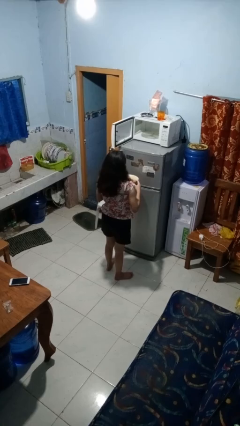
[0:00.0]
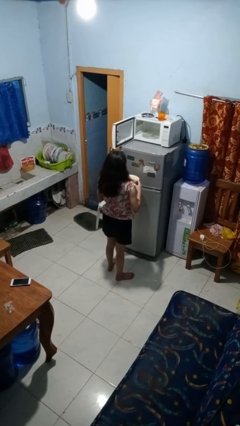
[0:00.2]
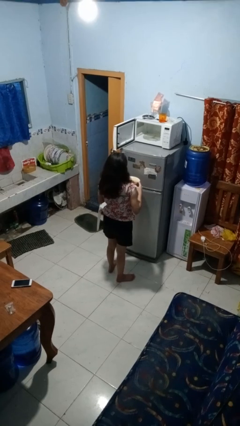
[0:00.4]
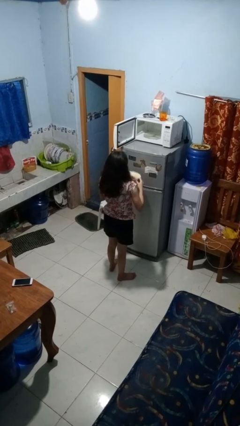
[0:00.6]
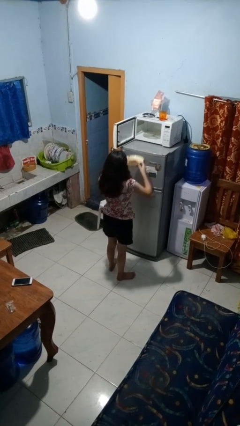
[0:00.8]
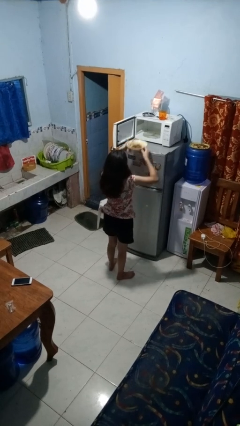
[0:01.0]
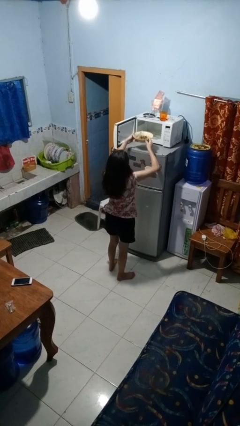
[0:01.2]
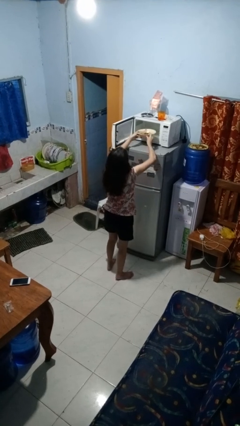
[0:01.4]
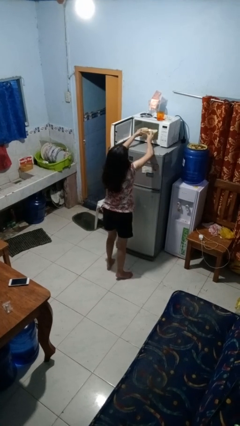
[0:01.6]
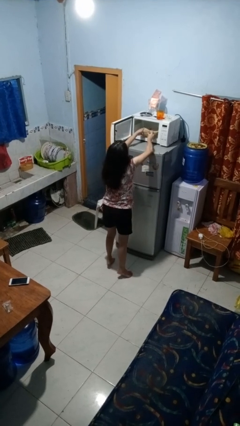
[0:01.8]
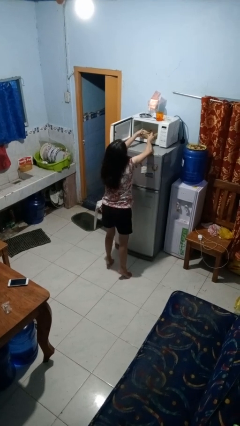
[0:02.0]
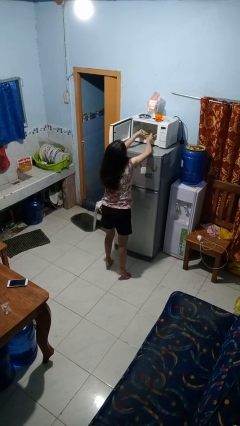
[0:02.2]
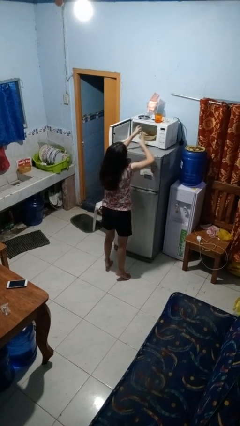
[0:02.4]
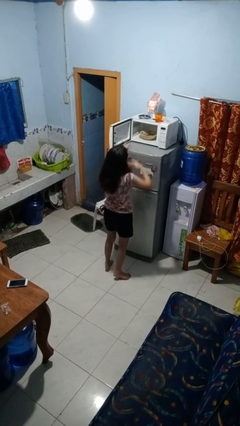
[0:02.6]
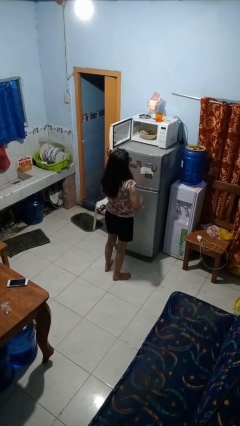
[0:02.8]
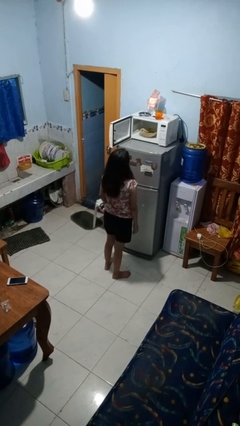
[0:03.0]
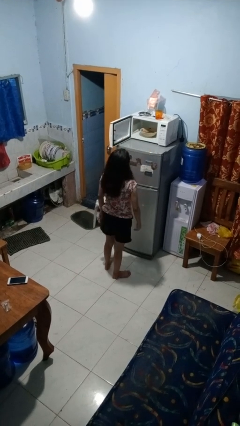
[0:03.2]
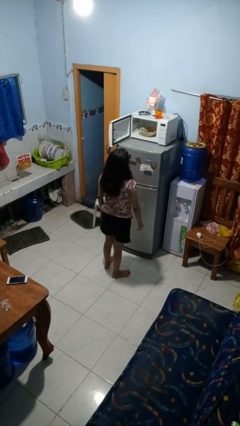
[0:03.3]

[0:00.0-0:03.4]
person puts object into microwave

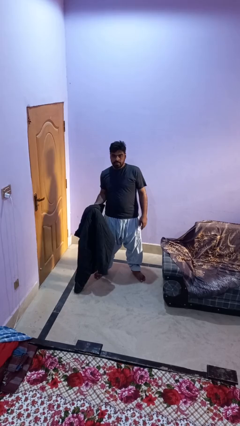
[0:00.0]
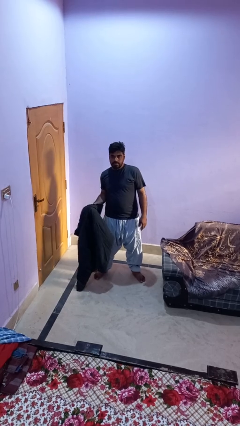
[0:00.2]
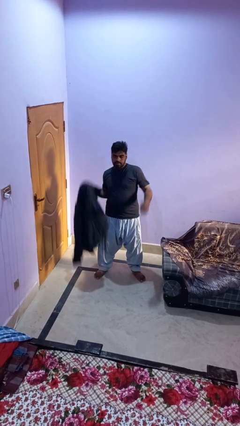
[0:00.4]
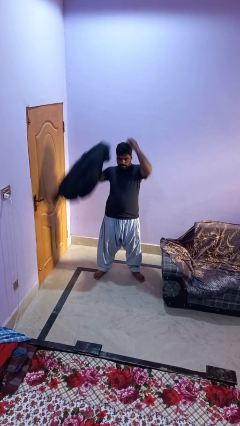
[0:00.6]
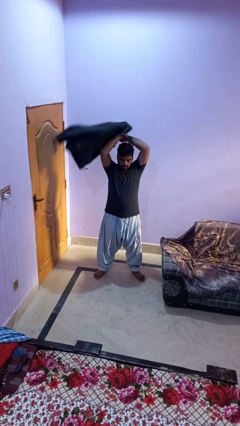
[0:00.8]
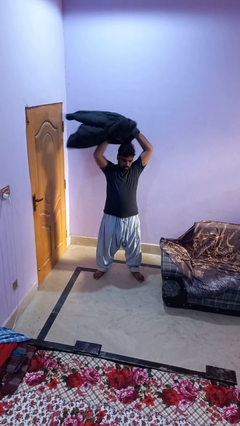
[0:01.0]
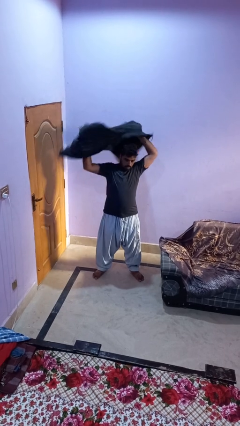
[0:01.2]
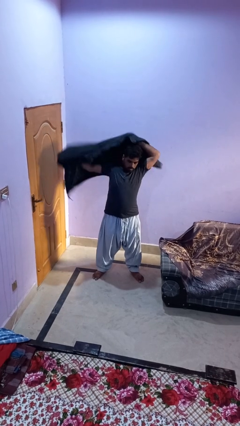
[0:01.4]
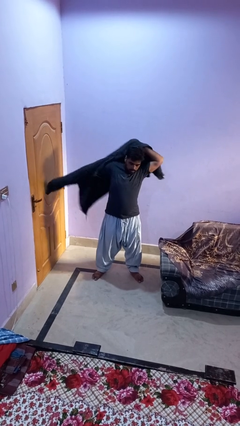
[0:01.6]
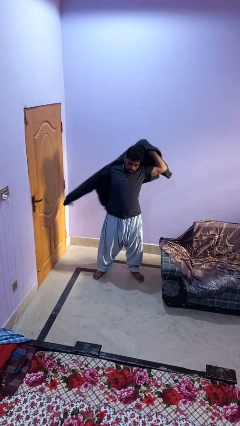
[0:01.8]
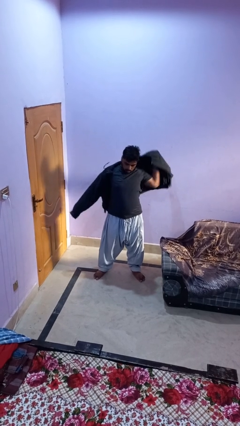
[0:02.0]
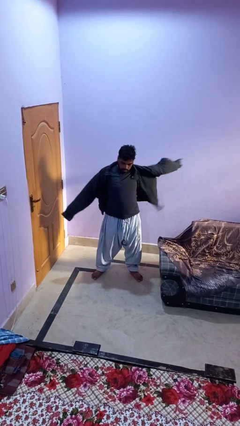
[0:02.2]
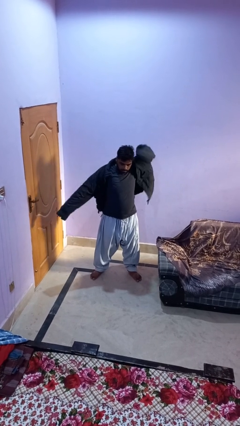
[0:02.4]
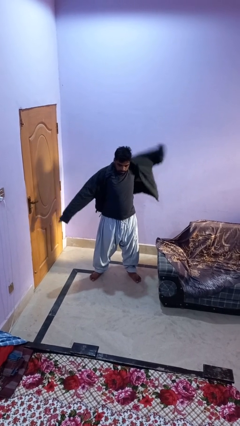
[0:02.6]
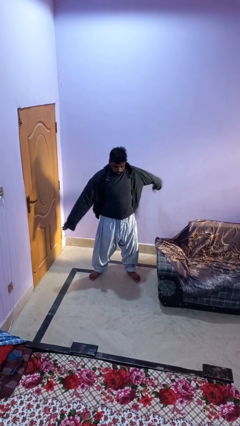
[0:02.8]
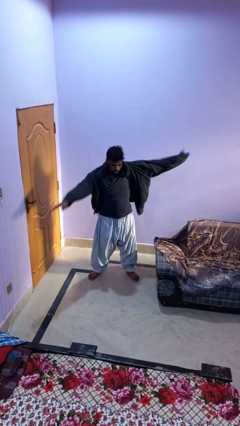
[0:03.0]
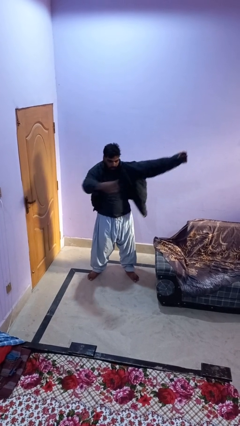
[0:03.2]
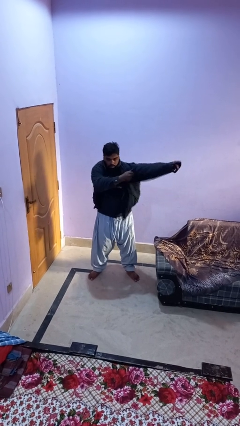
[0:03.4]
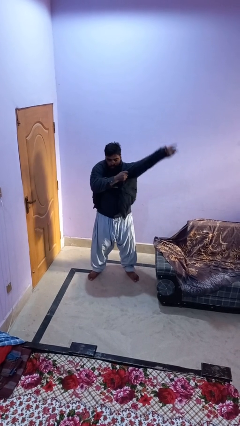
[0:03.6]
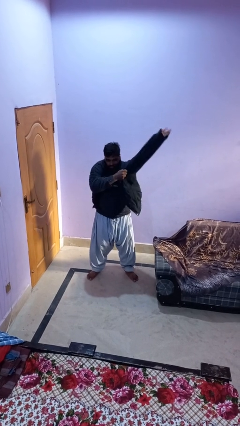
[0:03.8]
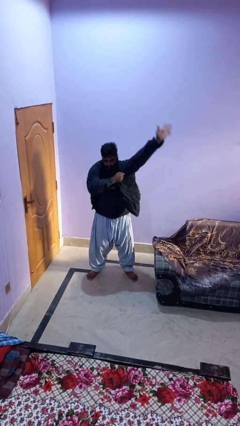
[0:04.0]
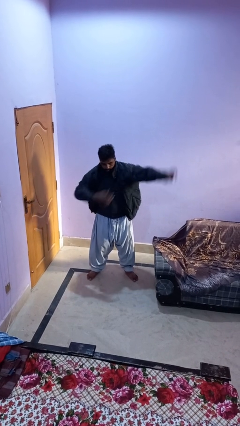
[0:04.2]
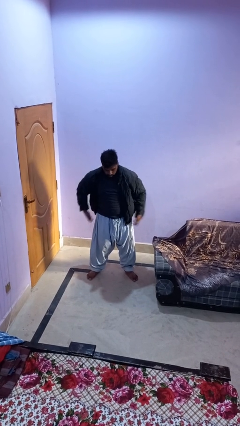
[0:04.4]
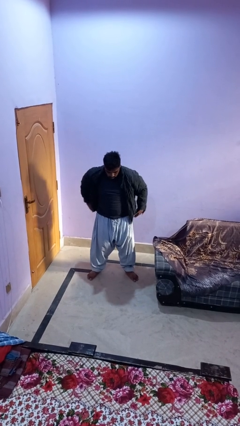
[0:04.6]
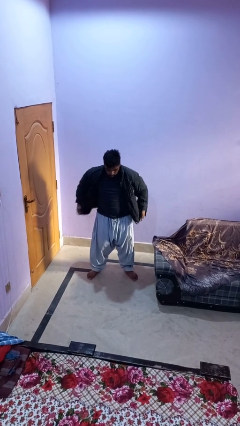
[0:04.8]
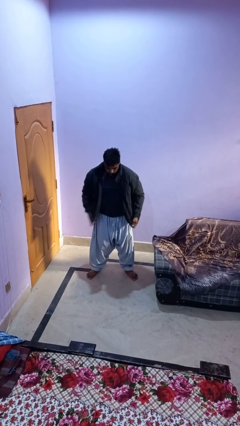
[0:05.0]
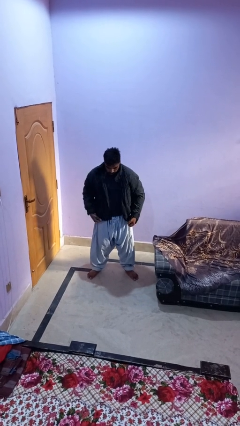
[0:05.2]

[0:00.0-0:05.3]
person puts on jacket

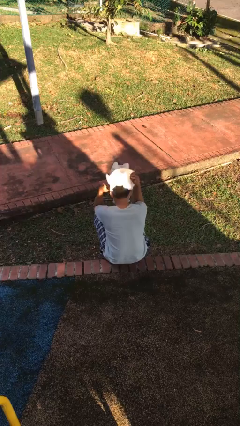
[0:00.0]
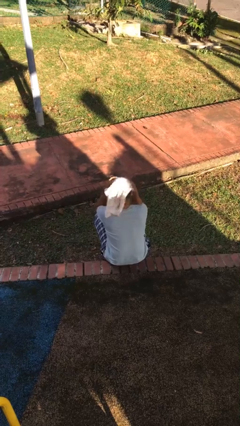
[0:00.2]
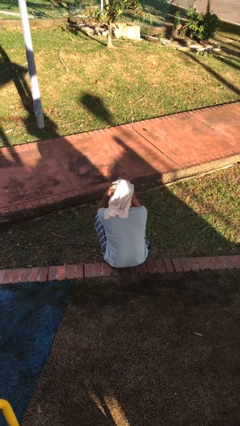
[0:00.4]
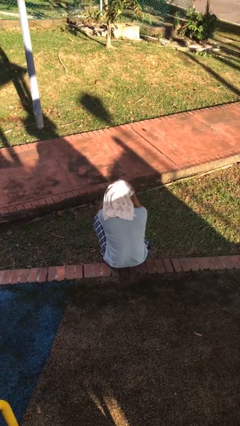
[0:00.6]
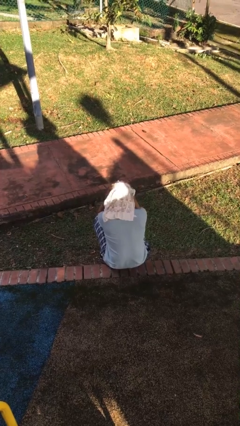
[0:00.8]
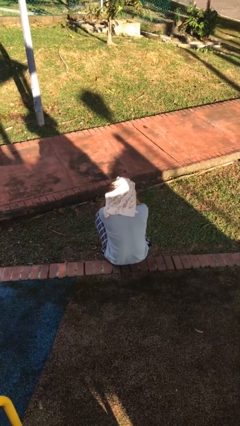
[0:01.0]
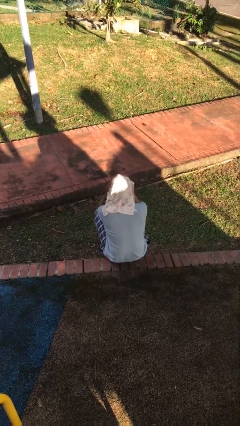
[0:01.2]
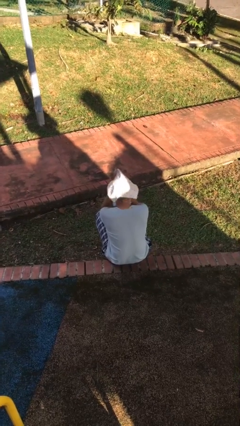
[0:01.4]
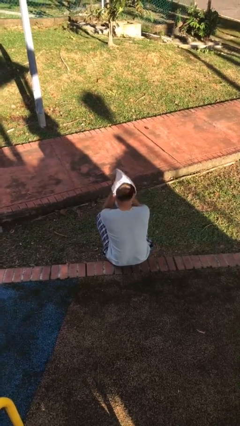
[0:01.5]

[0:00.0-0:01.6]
person dries hair with towel

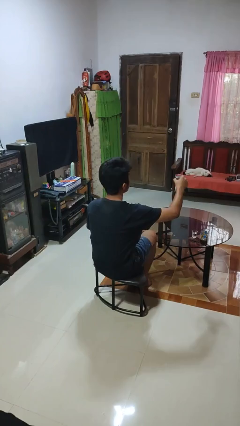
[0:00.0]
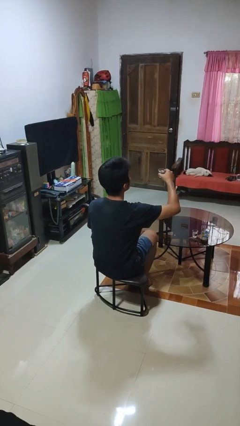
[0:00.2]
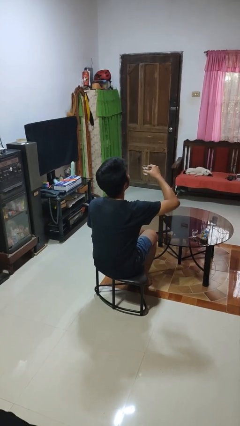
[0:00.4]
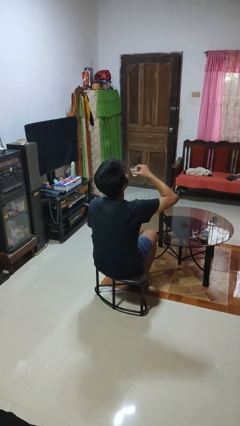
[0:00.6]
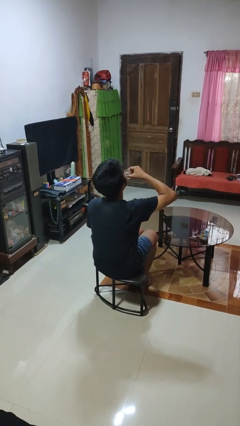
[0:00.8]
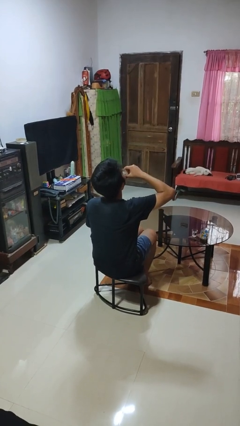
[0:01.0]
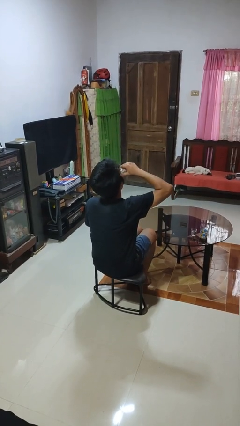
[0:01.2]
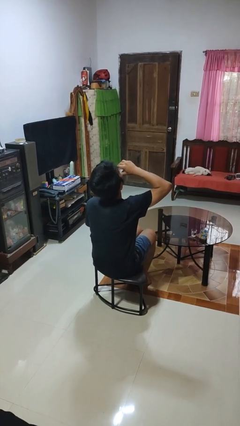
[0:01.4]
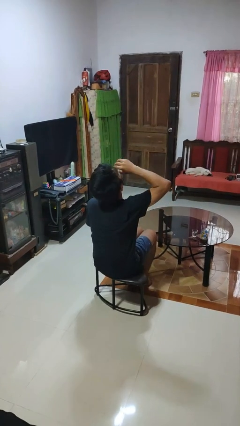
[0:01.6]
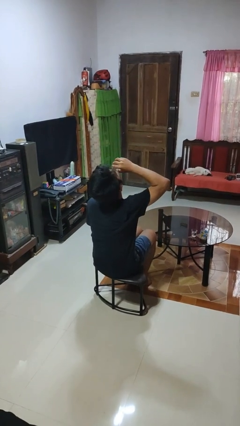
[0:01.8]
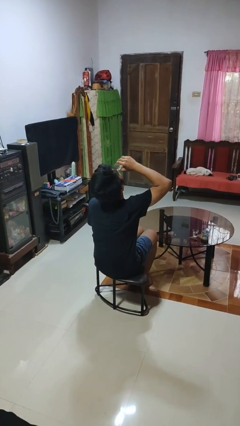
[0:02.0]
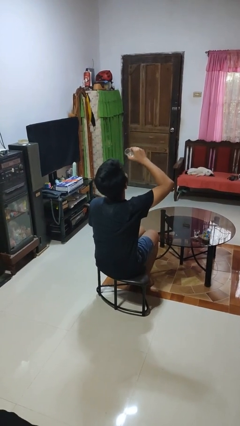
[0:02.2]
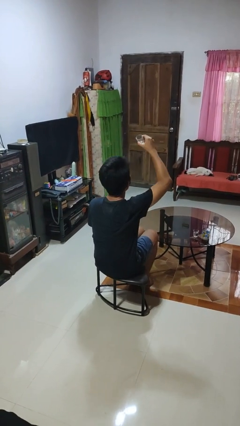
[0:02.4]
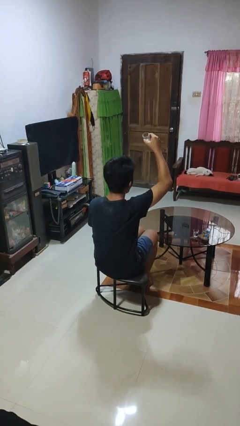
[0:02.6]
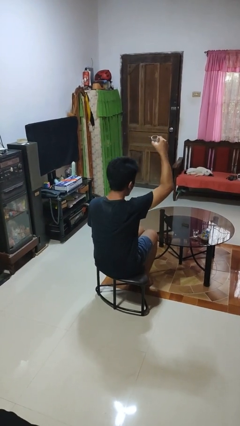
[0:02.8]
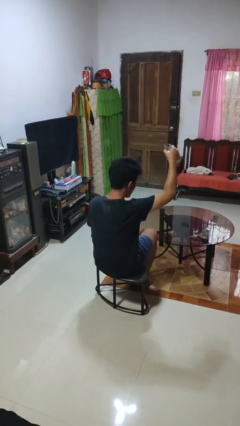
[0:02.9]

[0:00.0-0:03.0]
person drinks from shotglass

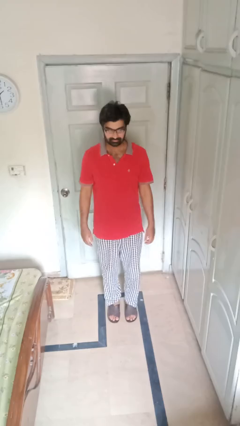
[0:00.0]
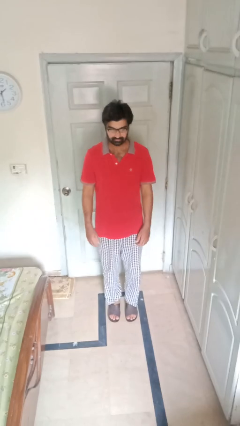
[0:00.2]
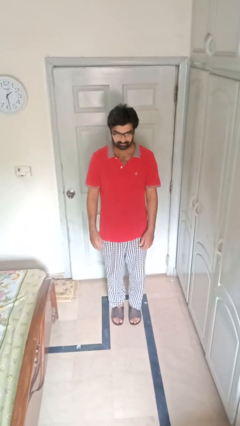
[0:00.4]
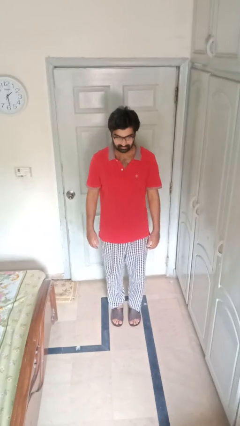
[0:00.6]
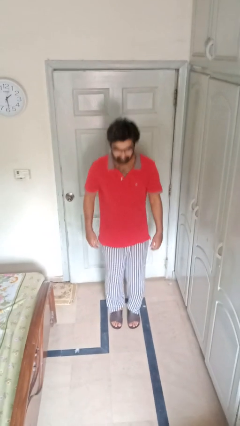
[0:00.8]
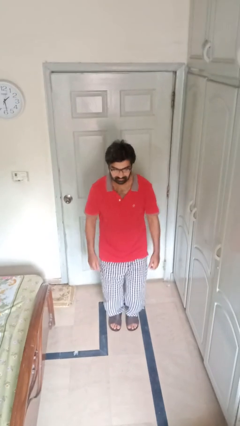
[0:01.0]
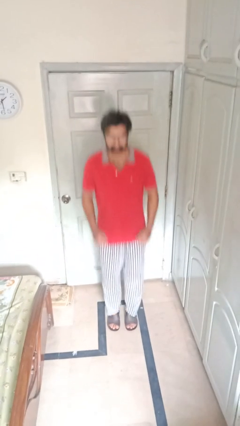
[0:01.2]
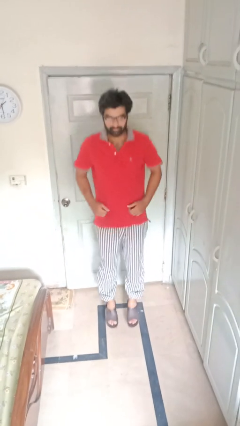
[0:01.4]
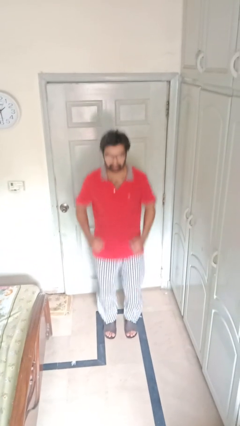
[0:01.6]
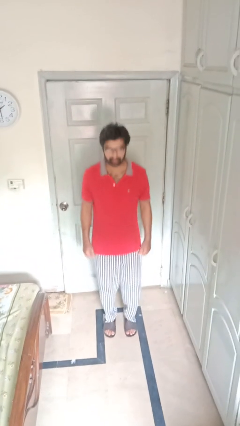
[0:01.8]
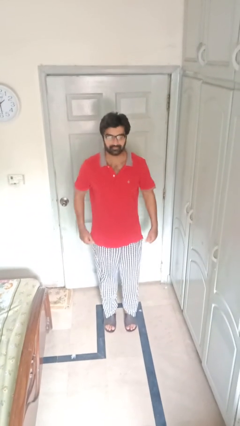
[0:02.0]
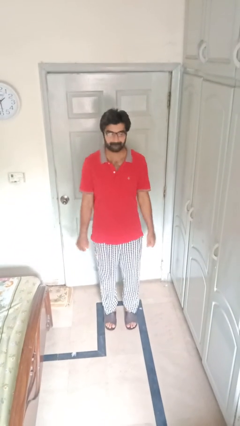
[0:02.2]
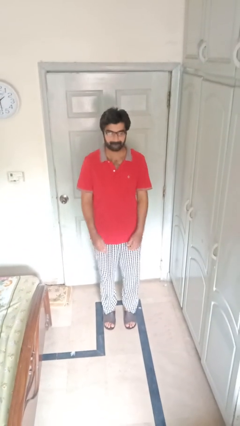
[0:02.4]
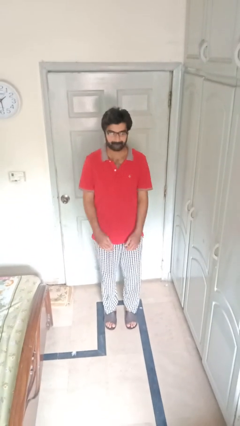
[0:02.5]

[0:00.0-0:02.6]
person jumps

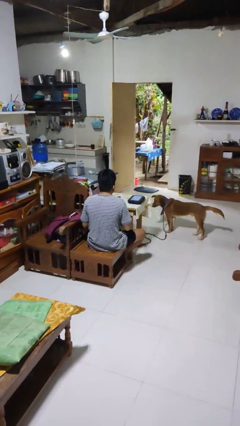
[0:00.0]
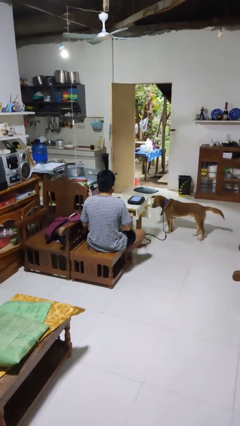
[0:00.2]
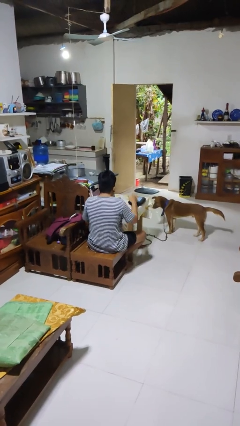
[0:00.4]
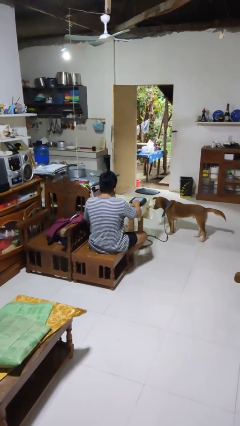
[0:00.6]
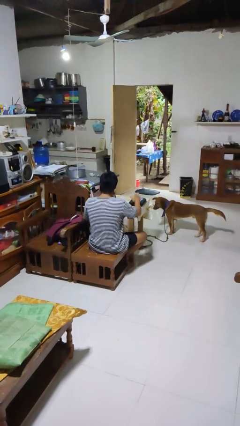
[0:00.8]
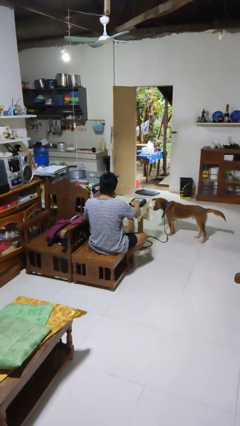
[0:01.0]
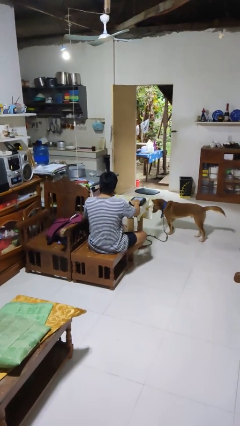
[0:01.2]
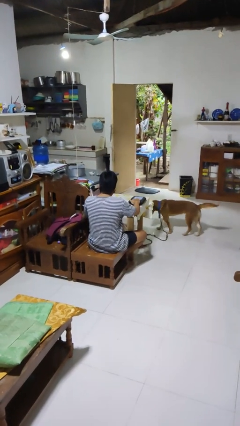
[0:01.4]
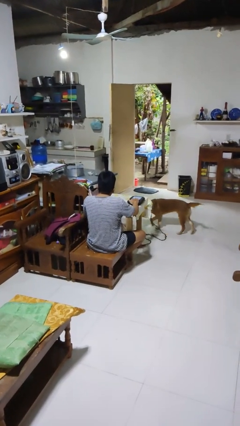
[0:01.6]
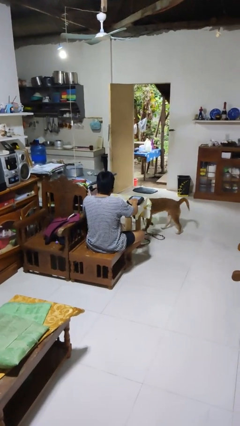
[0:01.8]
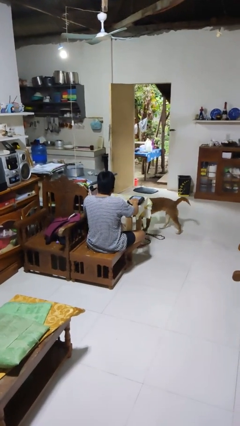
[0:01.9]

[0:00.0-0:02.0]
person taps object with finger
